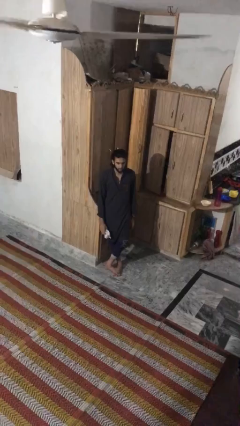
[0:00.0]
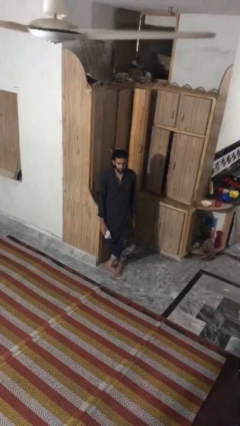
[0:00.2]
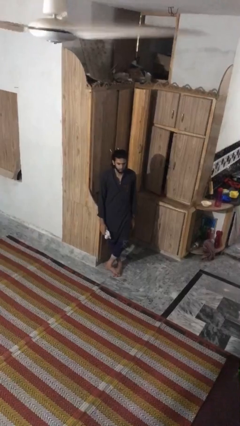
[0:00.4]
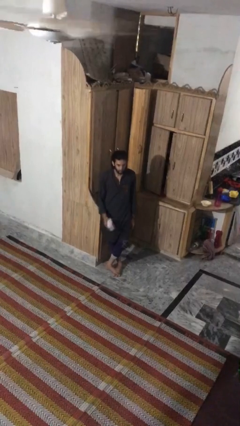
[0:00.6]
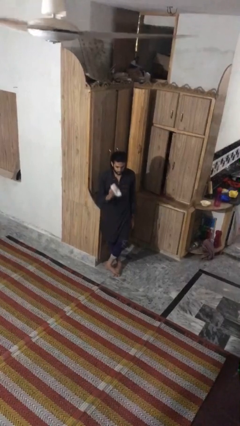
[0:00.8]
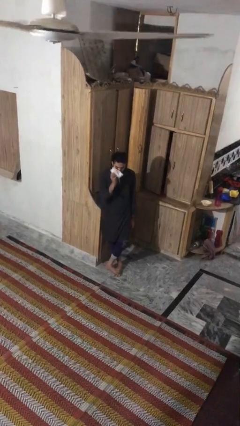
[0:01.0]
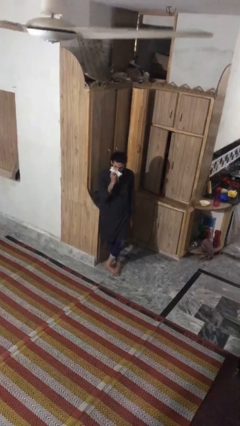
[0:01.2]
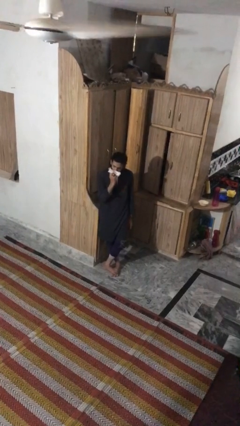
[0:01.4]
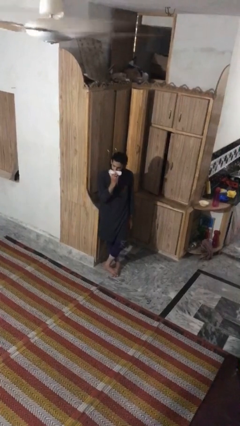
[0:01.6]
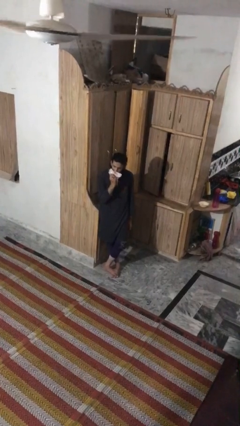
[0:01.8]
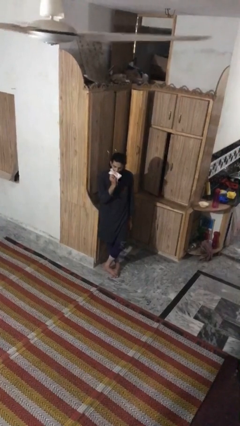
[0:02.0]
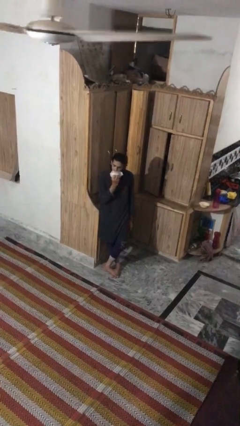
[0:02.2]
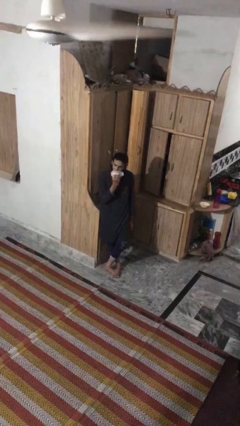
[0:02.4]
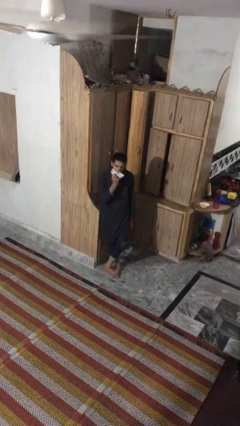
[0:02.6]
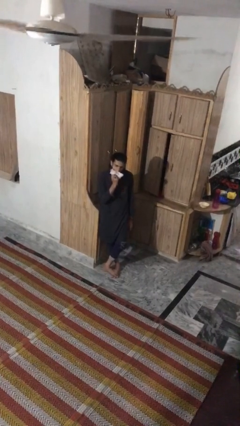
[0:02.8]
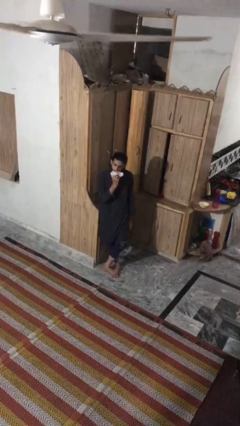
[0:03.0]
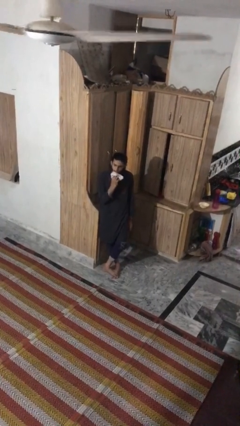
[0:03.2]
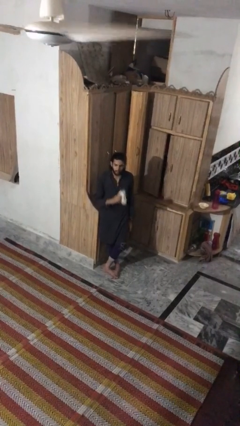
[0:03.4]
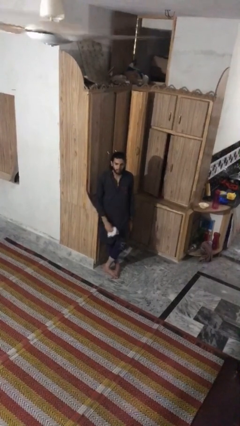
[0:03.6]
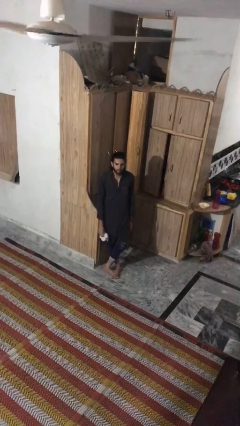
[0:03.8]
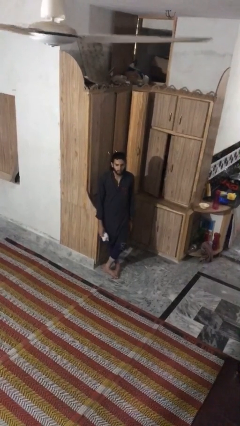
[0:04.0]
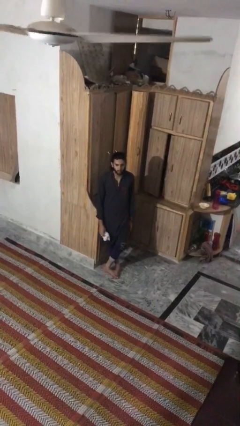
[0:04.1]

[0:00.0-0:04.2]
person wipes mouth with napkin

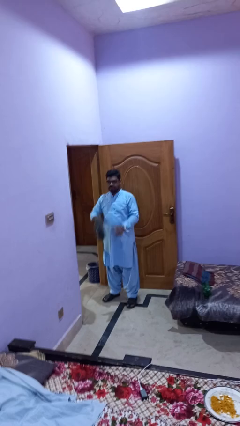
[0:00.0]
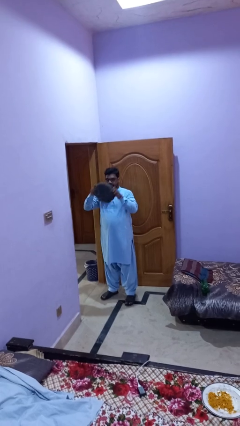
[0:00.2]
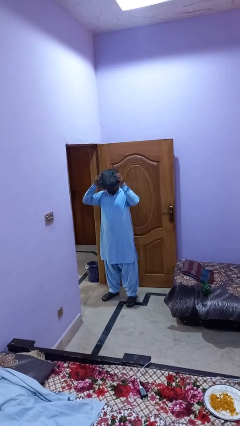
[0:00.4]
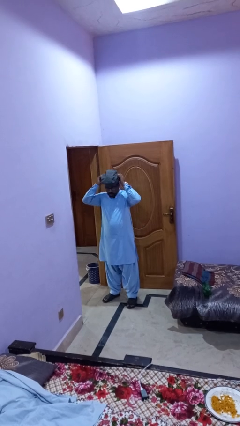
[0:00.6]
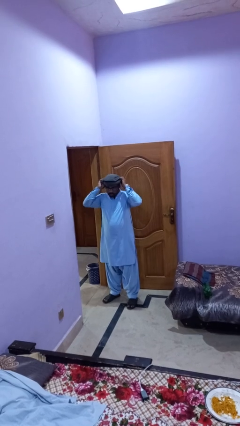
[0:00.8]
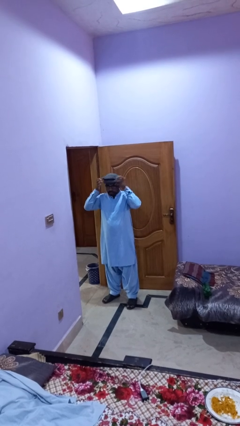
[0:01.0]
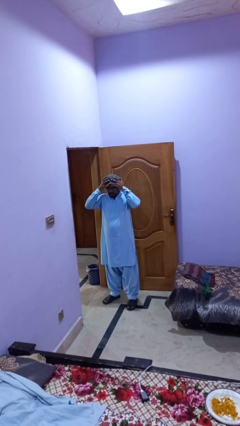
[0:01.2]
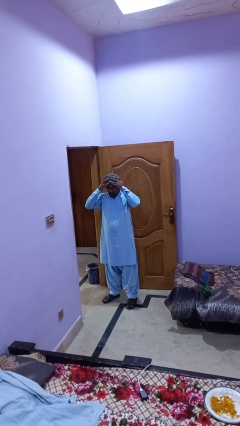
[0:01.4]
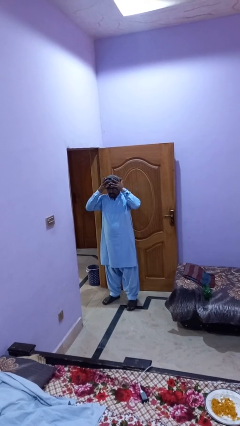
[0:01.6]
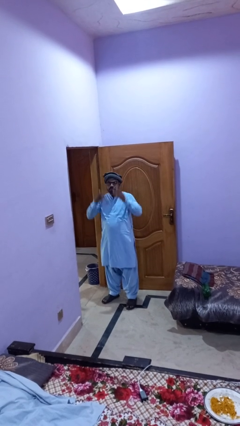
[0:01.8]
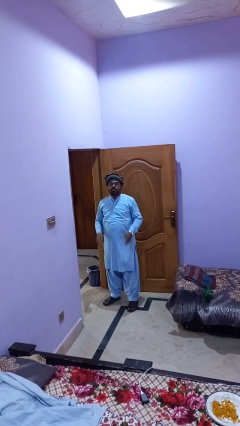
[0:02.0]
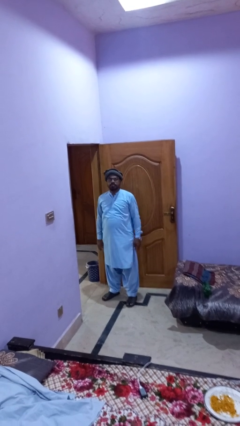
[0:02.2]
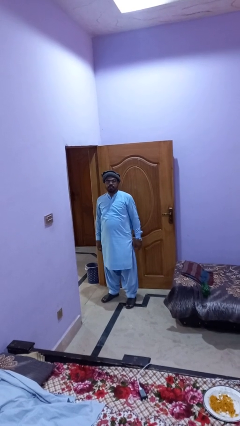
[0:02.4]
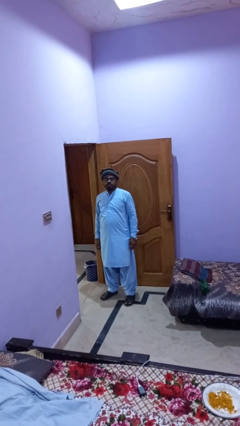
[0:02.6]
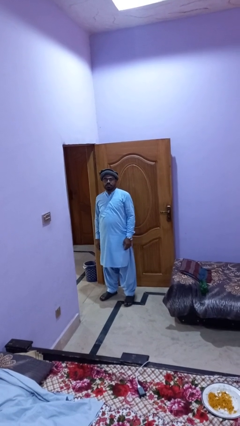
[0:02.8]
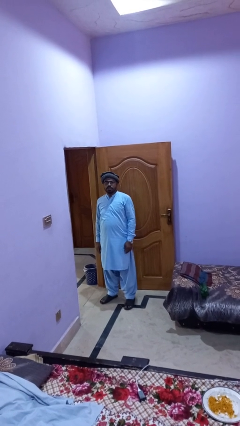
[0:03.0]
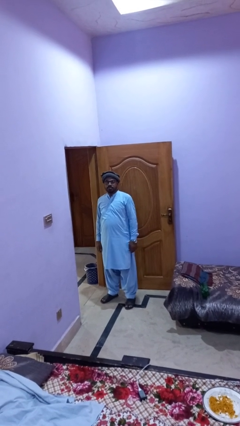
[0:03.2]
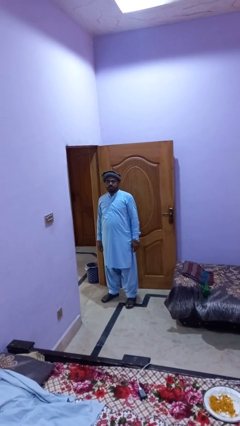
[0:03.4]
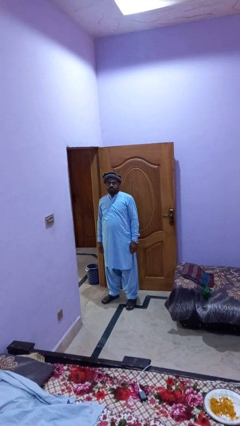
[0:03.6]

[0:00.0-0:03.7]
person puts on hat

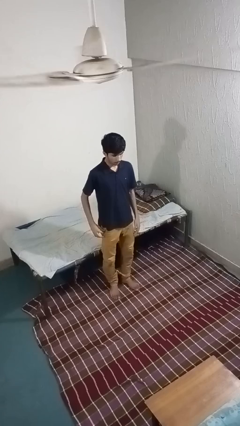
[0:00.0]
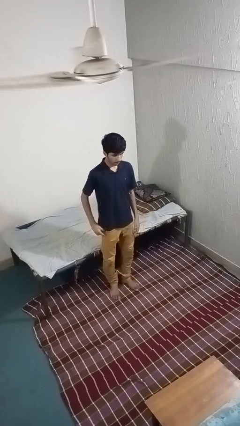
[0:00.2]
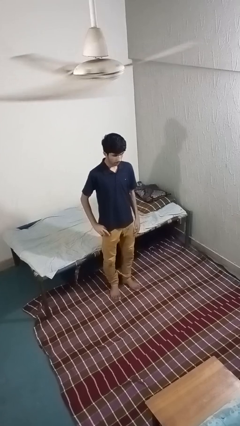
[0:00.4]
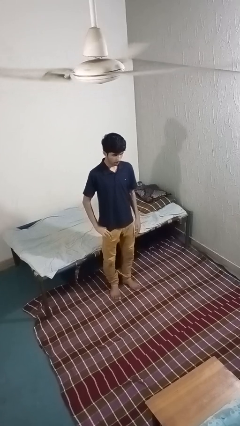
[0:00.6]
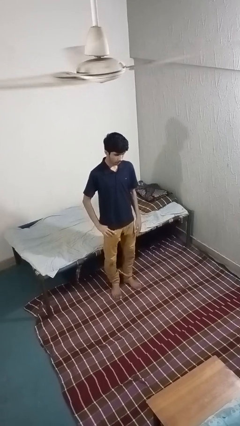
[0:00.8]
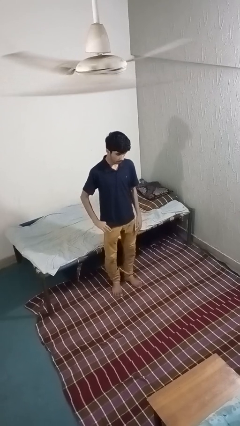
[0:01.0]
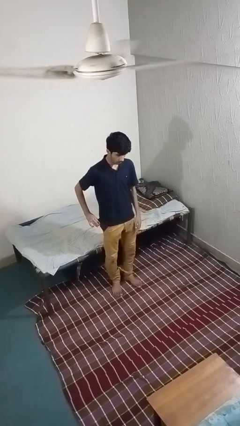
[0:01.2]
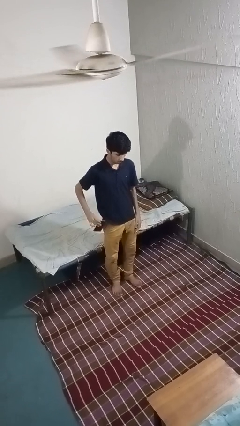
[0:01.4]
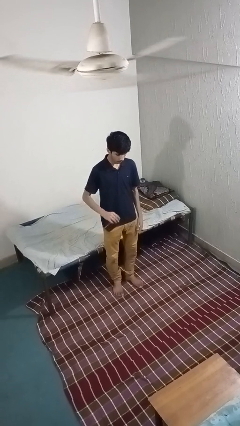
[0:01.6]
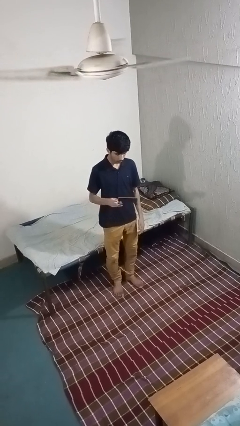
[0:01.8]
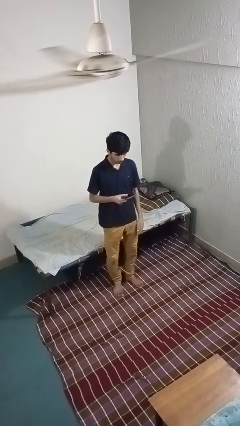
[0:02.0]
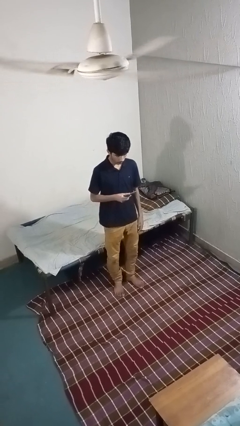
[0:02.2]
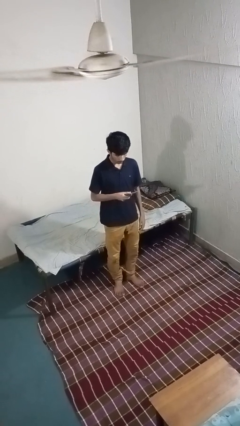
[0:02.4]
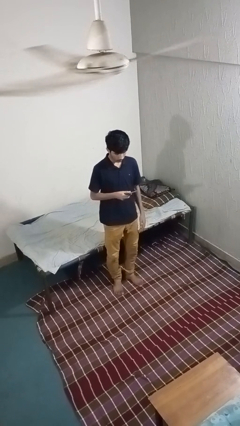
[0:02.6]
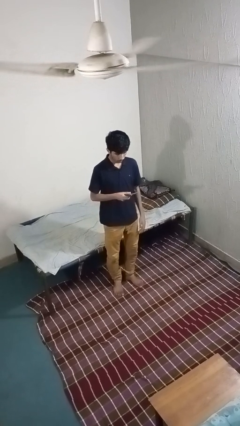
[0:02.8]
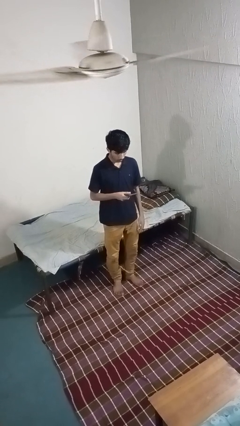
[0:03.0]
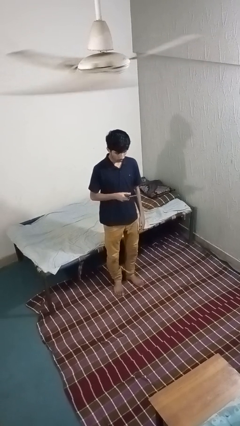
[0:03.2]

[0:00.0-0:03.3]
person takes phone from pocket

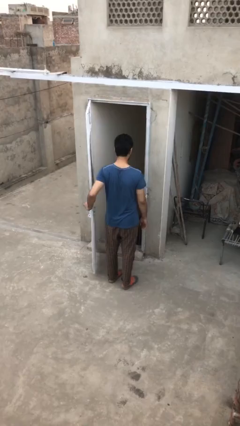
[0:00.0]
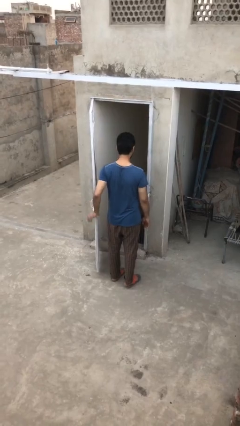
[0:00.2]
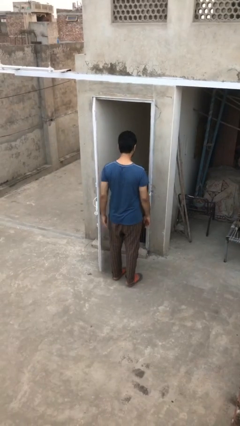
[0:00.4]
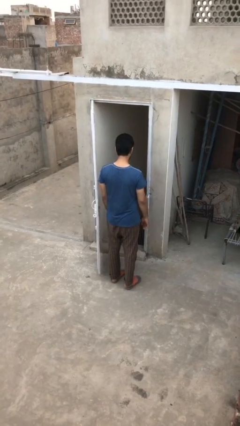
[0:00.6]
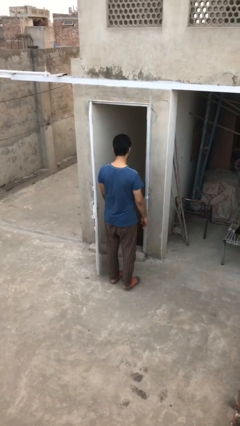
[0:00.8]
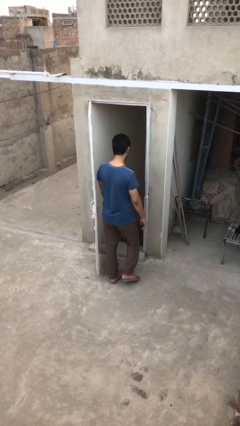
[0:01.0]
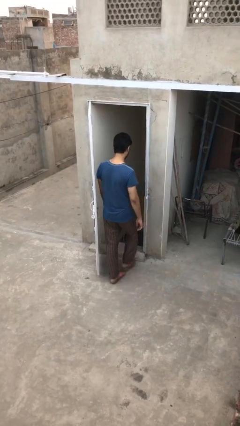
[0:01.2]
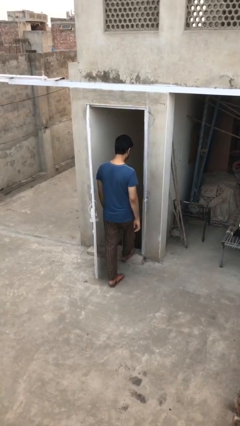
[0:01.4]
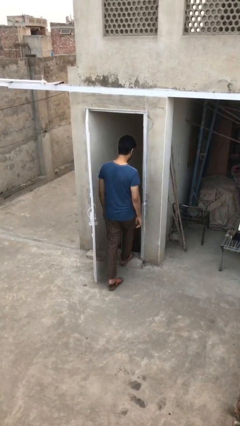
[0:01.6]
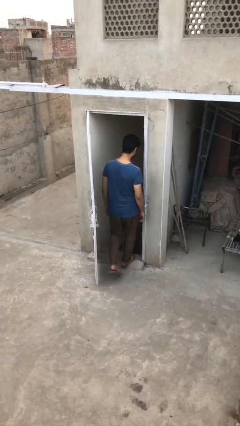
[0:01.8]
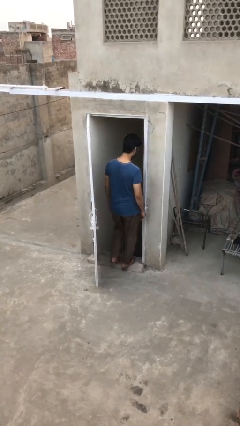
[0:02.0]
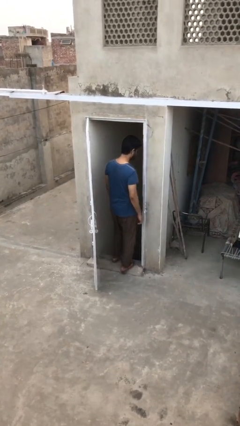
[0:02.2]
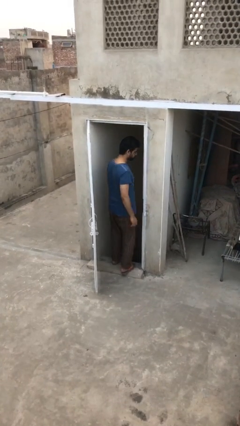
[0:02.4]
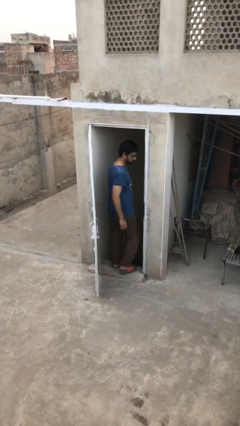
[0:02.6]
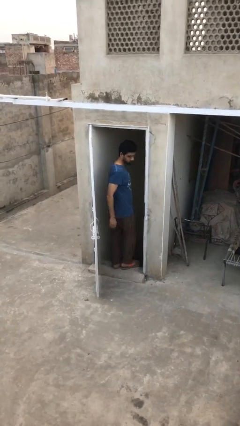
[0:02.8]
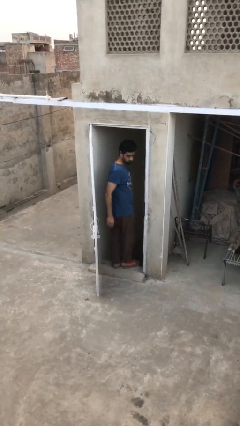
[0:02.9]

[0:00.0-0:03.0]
person exits scene through structure

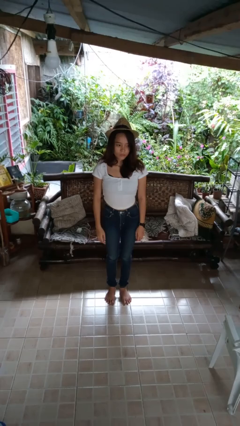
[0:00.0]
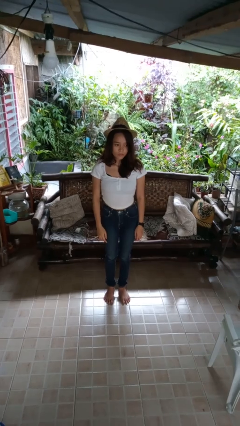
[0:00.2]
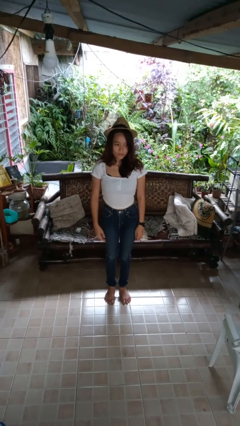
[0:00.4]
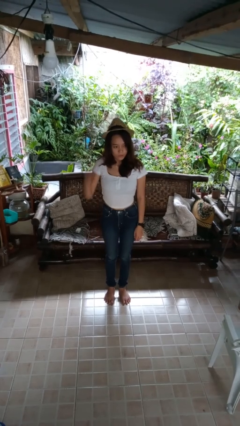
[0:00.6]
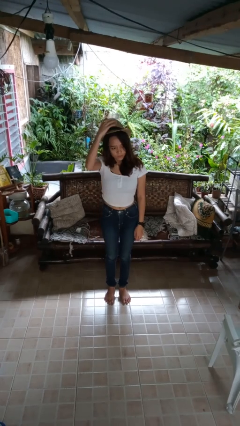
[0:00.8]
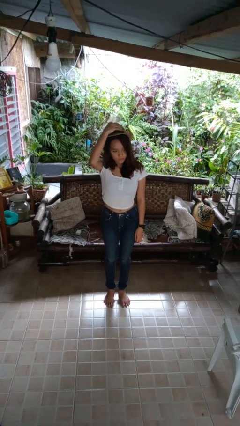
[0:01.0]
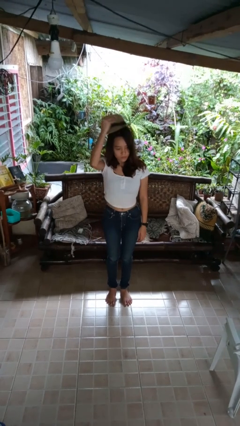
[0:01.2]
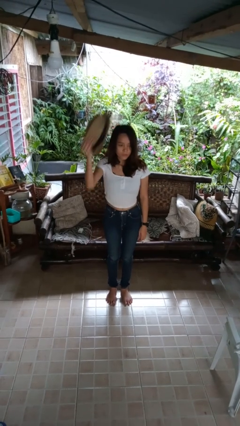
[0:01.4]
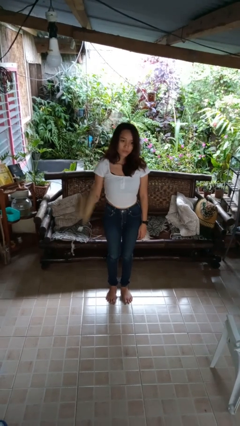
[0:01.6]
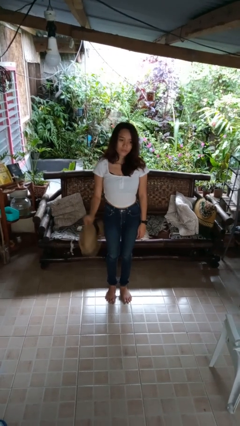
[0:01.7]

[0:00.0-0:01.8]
person takes off hat

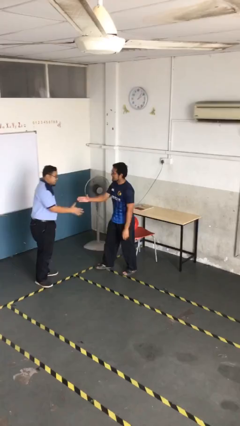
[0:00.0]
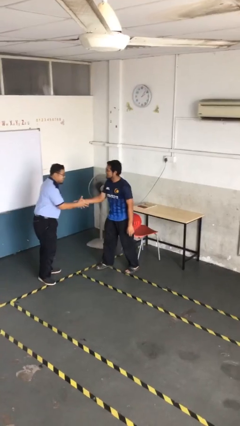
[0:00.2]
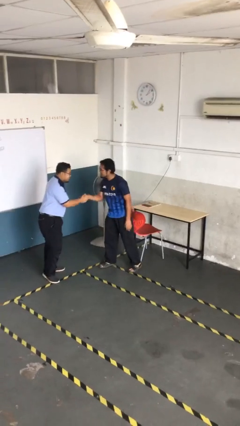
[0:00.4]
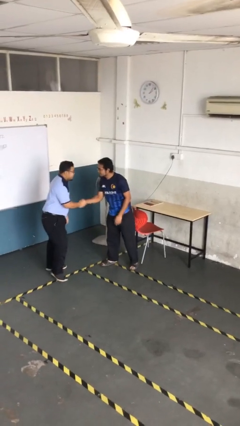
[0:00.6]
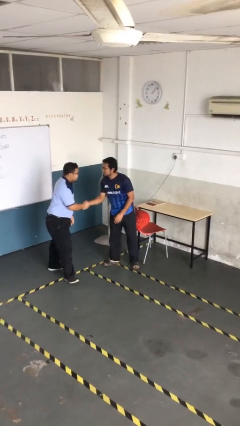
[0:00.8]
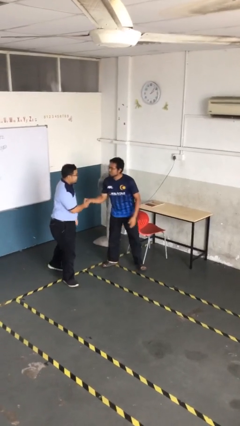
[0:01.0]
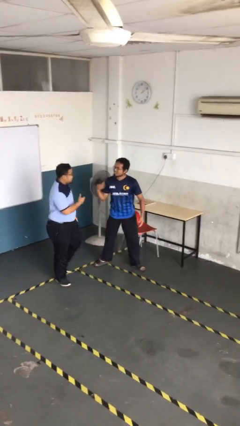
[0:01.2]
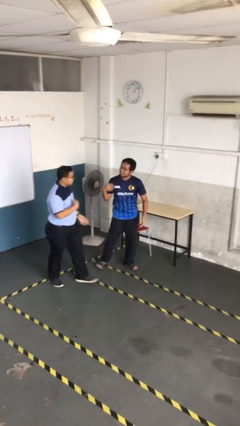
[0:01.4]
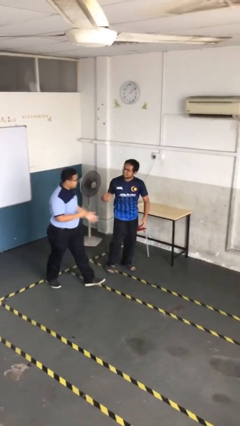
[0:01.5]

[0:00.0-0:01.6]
person shakes hand
